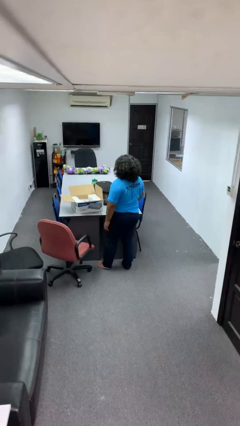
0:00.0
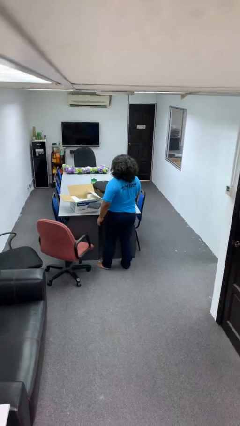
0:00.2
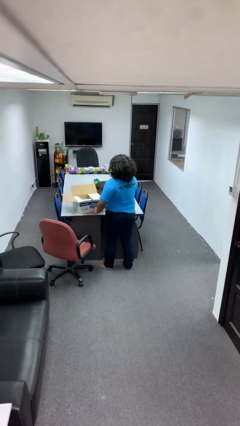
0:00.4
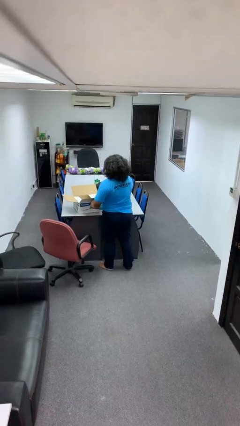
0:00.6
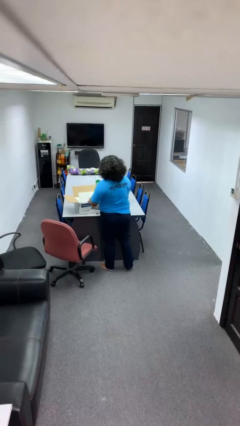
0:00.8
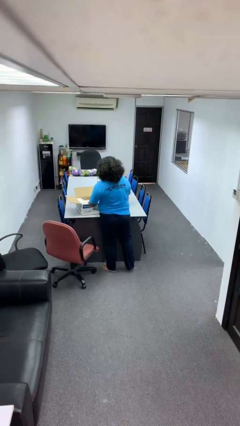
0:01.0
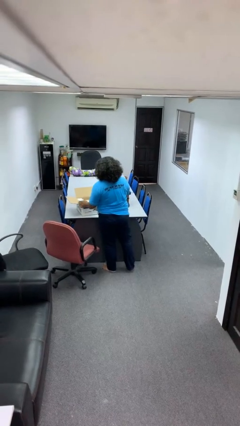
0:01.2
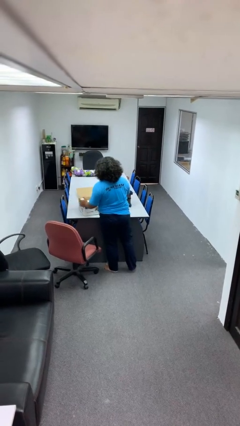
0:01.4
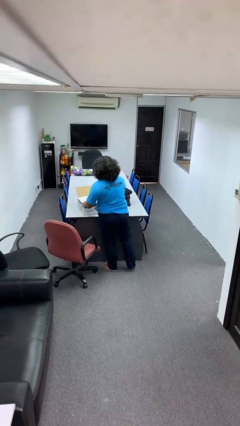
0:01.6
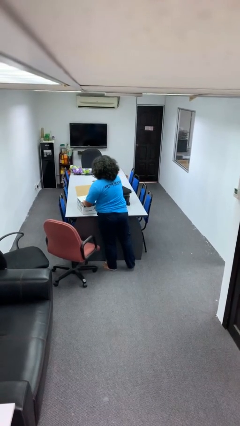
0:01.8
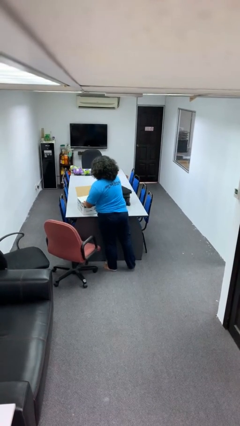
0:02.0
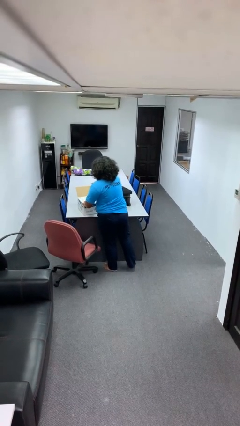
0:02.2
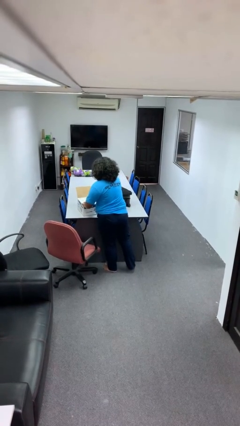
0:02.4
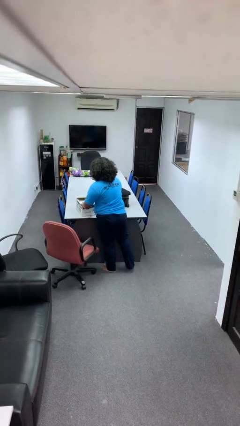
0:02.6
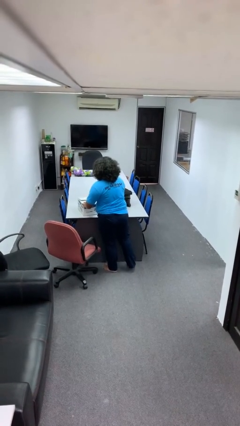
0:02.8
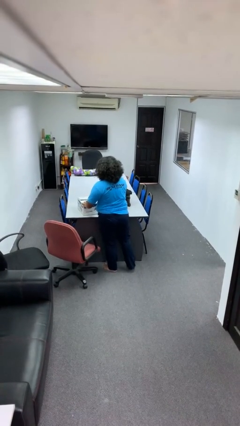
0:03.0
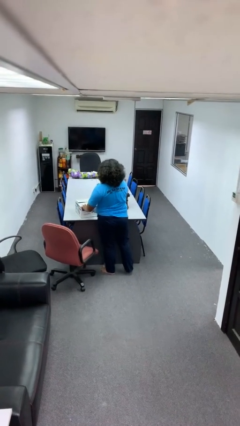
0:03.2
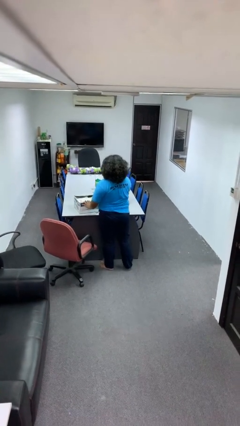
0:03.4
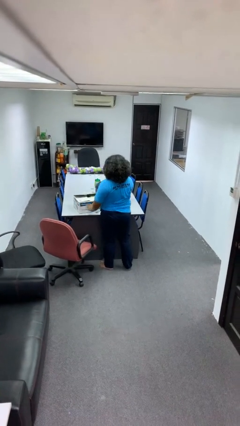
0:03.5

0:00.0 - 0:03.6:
person closes box

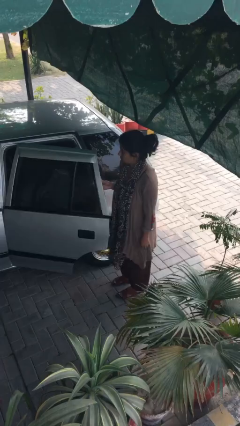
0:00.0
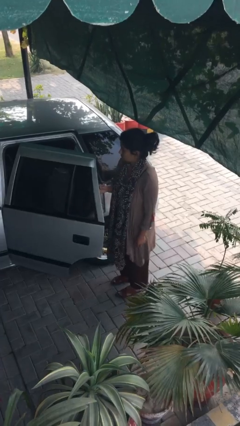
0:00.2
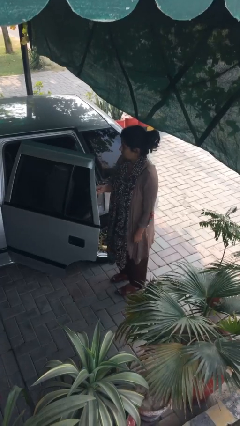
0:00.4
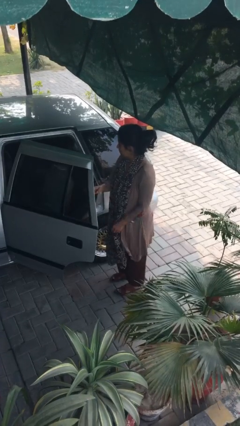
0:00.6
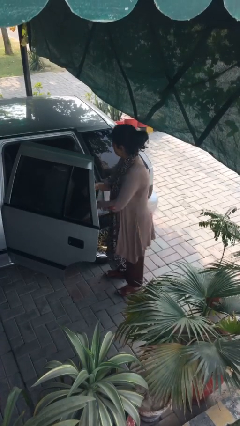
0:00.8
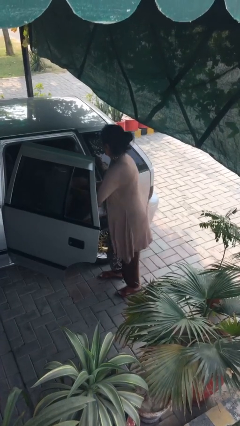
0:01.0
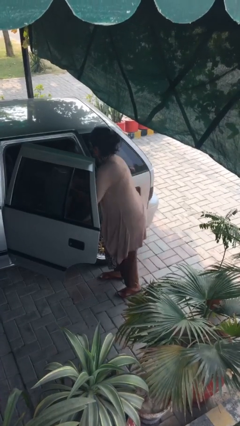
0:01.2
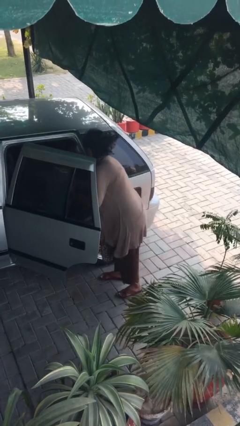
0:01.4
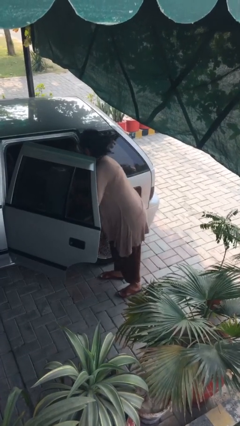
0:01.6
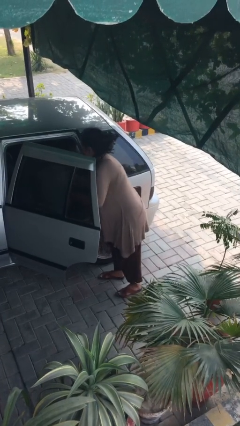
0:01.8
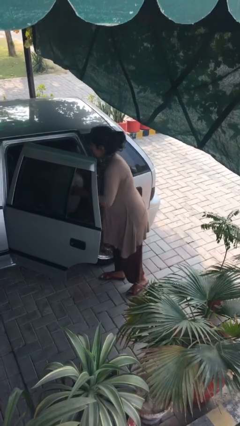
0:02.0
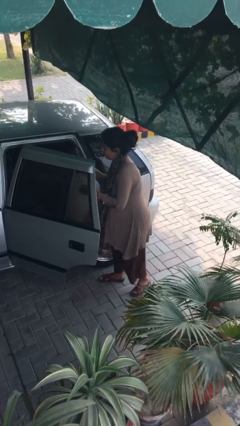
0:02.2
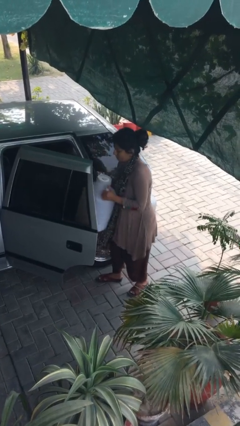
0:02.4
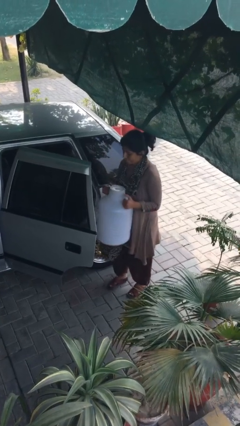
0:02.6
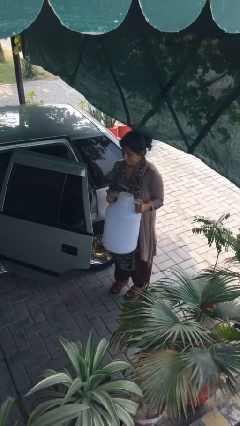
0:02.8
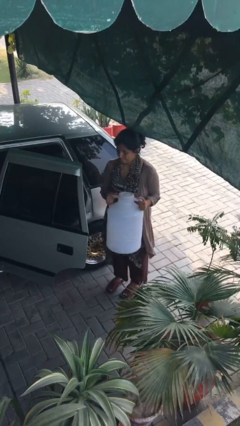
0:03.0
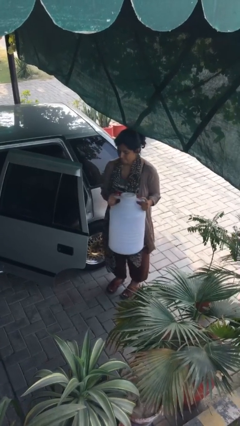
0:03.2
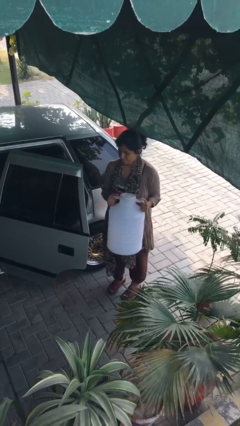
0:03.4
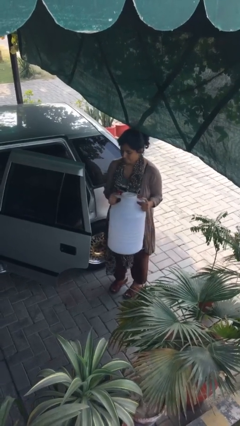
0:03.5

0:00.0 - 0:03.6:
person unloads car

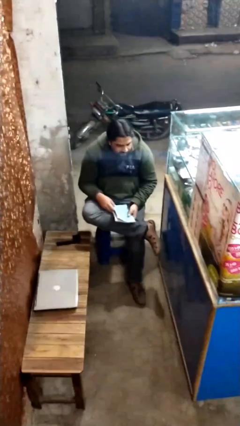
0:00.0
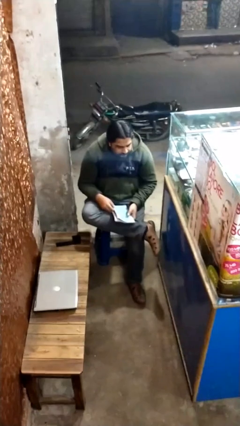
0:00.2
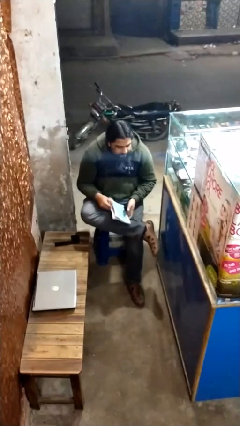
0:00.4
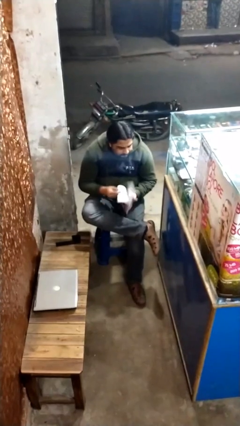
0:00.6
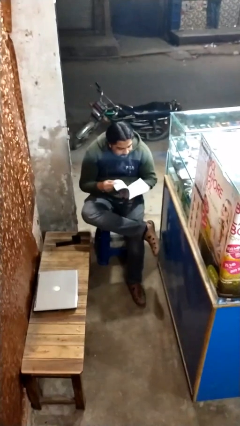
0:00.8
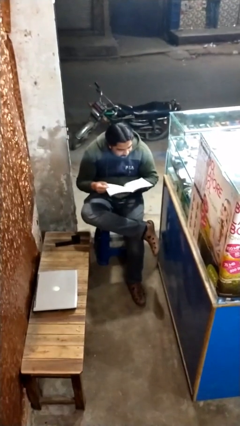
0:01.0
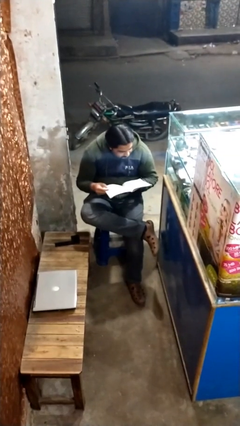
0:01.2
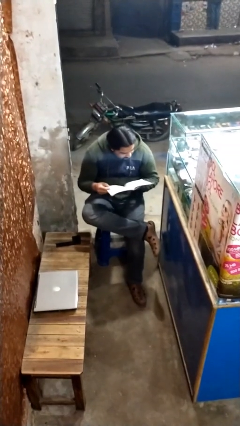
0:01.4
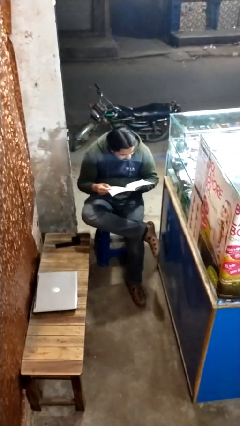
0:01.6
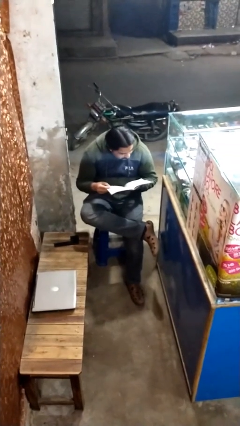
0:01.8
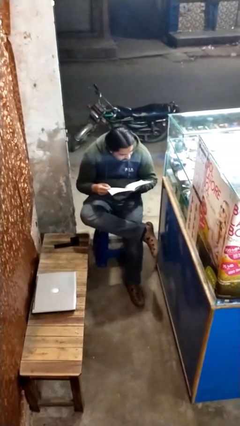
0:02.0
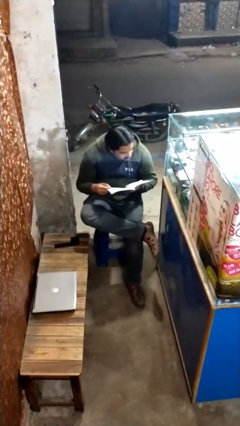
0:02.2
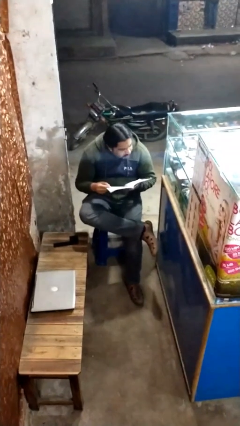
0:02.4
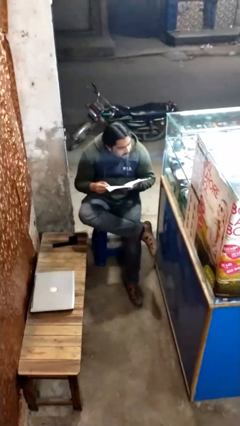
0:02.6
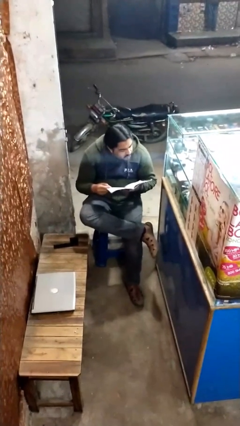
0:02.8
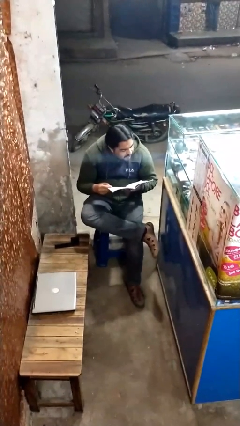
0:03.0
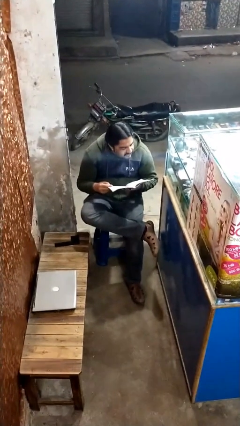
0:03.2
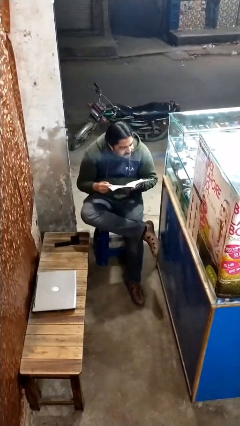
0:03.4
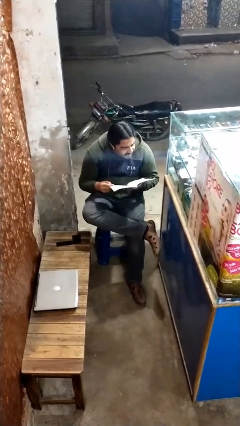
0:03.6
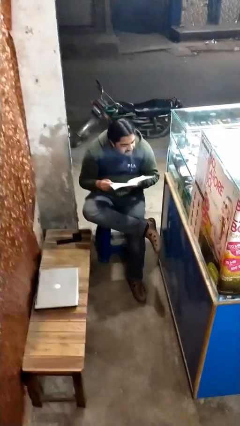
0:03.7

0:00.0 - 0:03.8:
person reads document

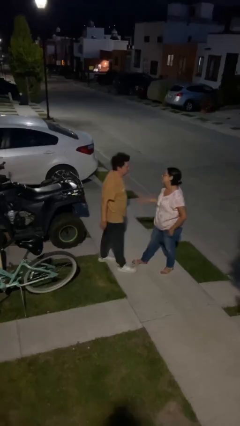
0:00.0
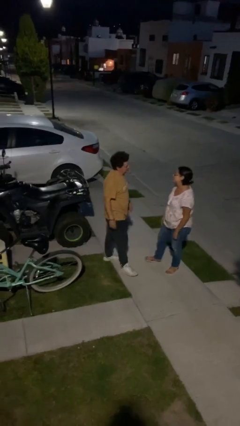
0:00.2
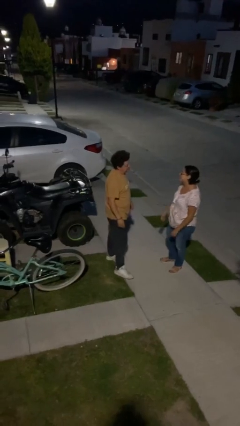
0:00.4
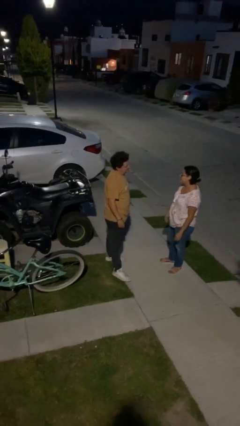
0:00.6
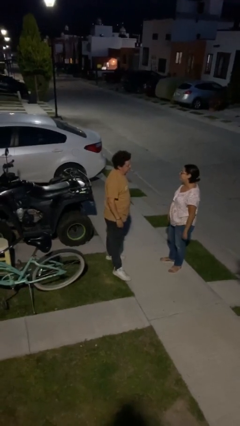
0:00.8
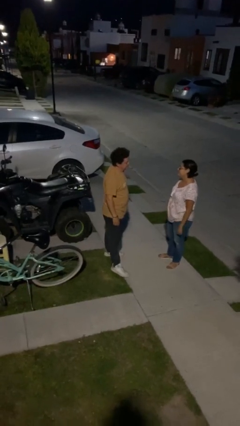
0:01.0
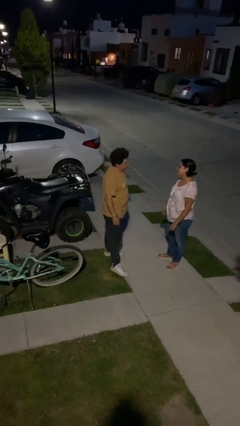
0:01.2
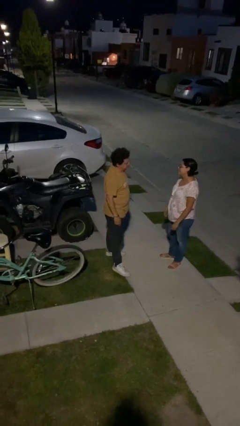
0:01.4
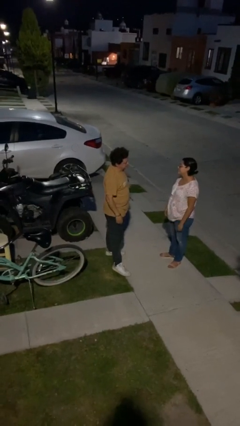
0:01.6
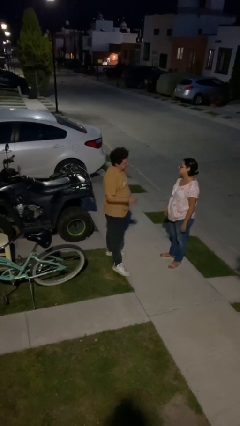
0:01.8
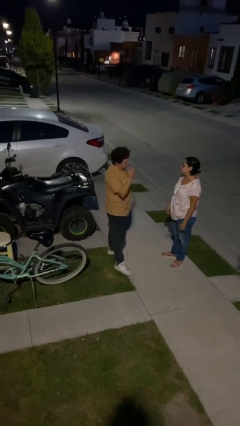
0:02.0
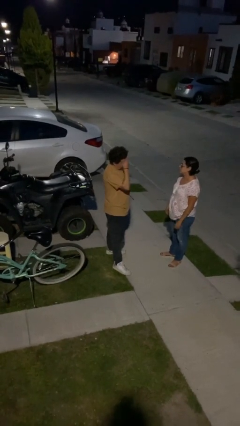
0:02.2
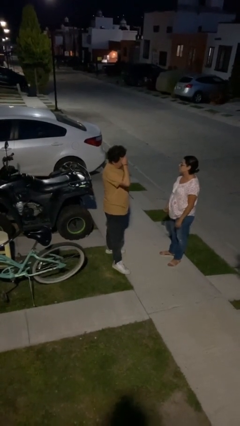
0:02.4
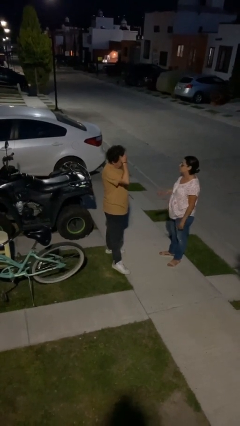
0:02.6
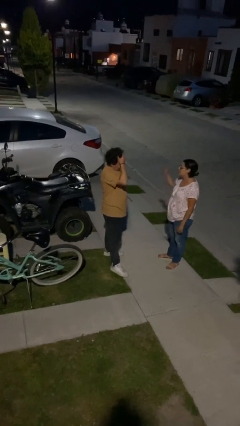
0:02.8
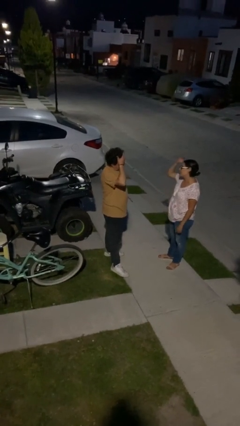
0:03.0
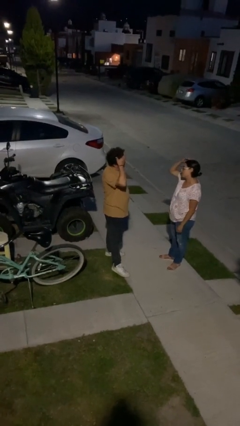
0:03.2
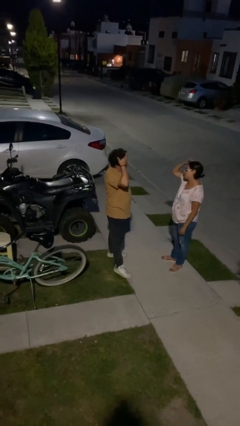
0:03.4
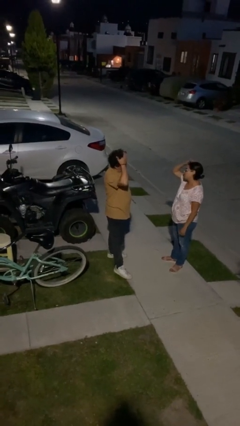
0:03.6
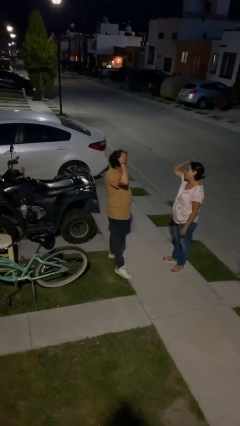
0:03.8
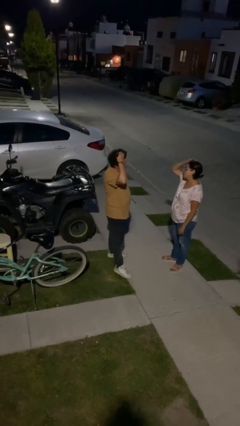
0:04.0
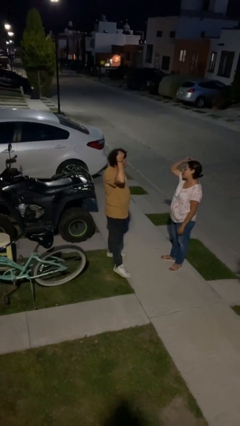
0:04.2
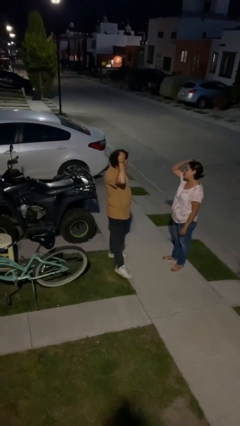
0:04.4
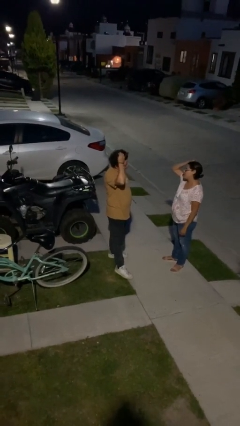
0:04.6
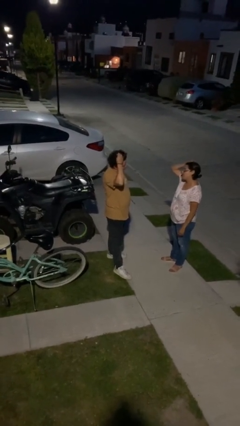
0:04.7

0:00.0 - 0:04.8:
person talks to person

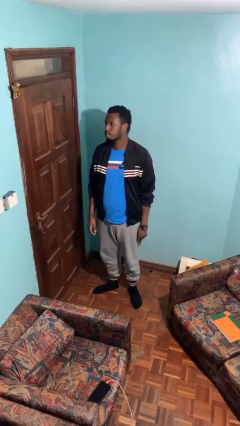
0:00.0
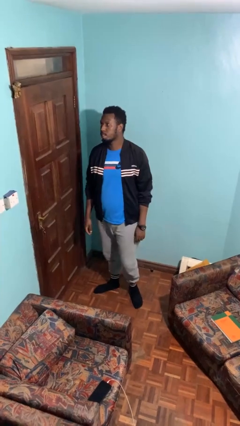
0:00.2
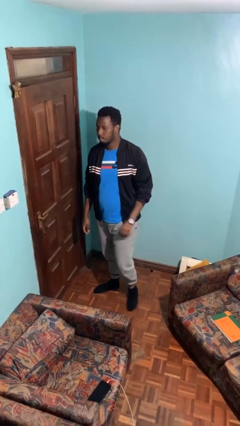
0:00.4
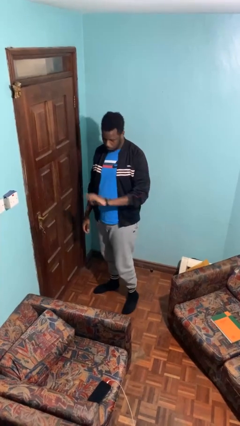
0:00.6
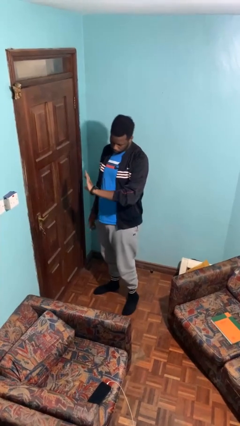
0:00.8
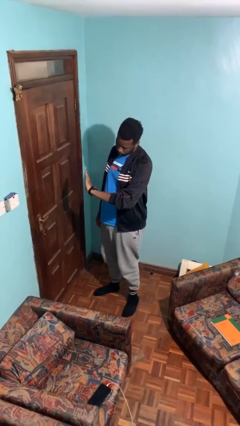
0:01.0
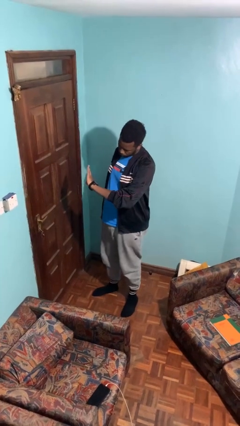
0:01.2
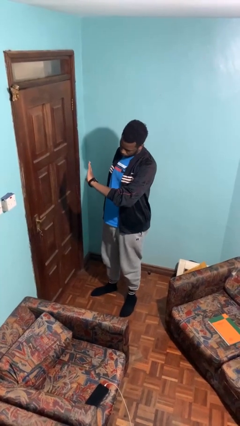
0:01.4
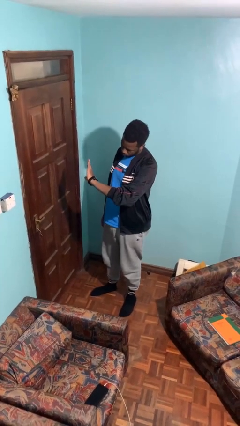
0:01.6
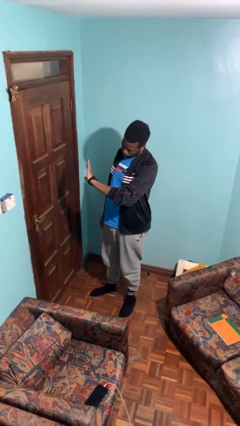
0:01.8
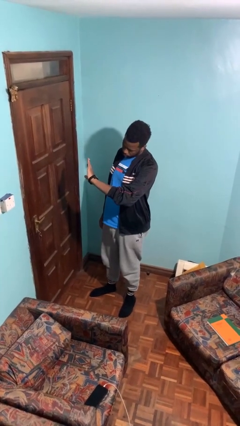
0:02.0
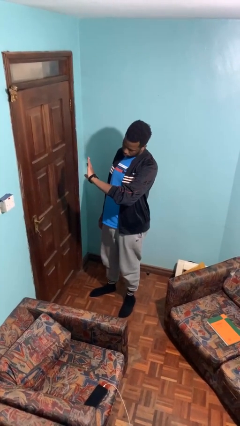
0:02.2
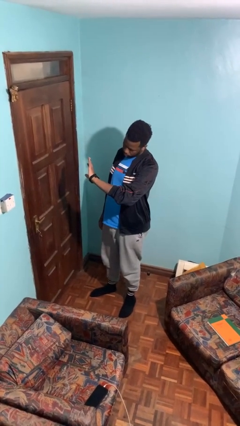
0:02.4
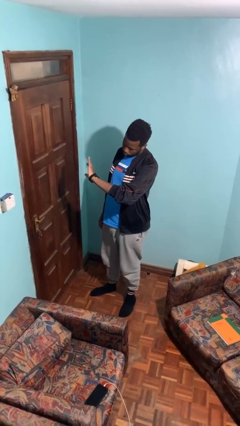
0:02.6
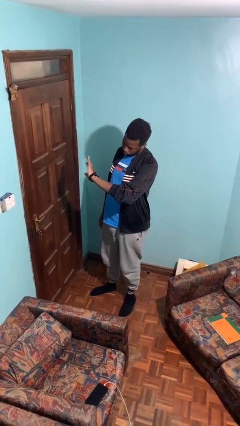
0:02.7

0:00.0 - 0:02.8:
person looks at wristwatch
